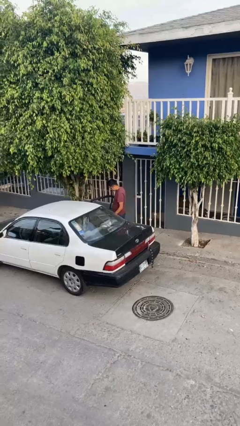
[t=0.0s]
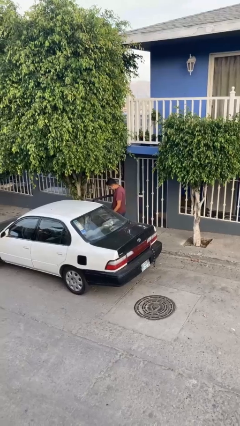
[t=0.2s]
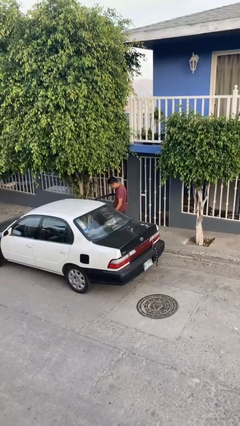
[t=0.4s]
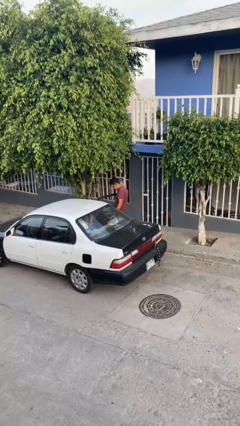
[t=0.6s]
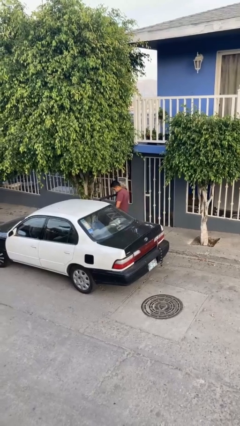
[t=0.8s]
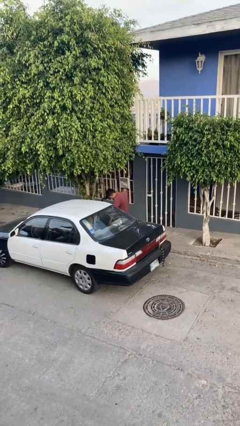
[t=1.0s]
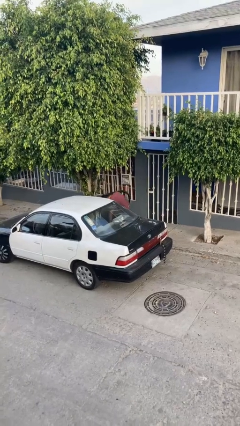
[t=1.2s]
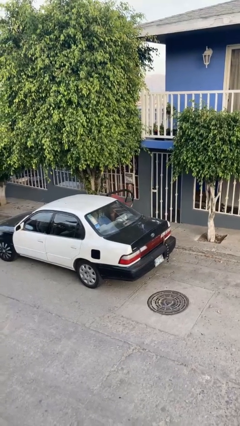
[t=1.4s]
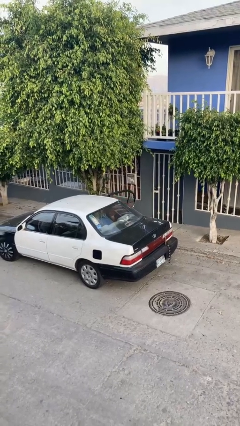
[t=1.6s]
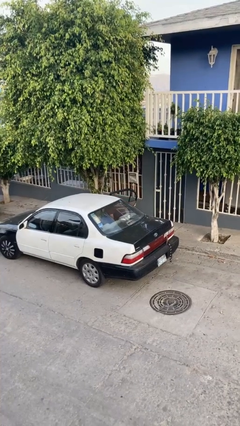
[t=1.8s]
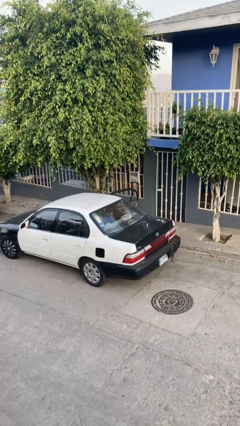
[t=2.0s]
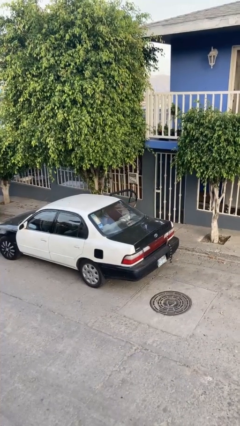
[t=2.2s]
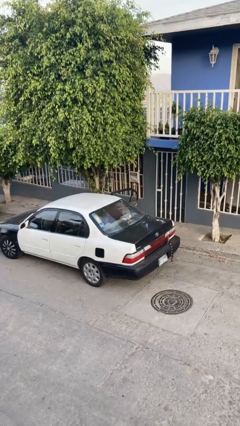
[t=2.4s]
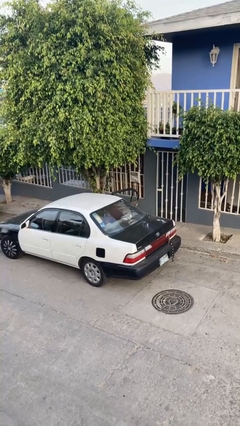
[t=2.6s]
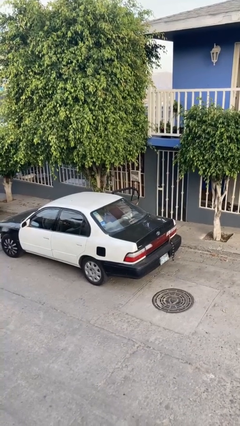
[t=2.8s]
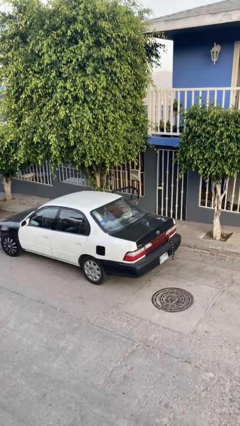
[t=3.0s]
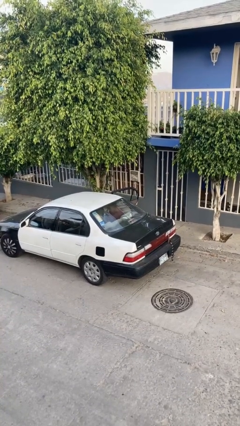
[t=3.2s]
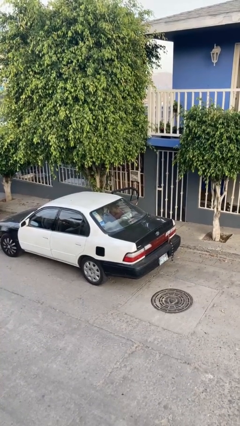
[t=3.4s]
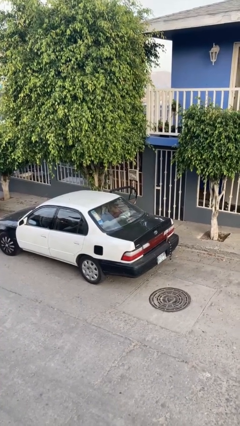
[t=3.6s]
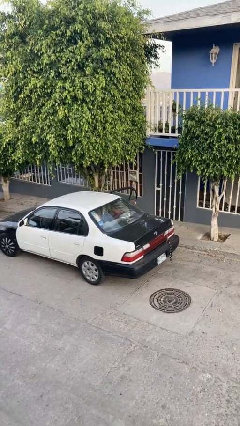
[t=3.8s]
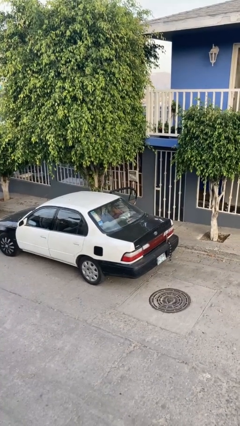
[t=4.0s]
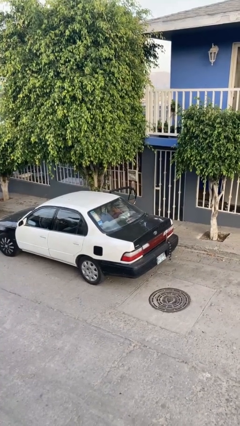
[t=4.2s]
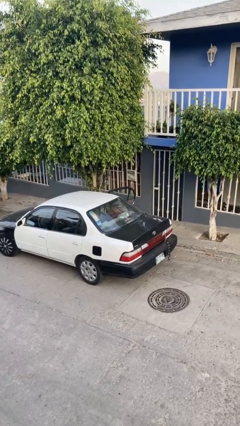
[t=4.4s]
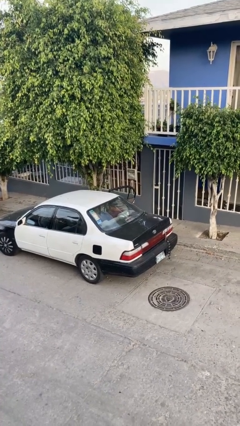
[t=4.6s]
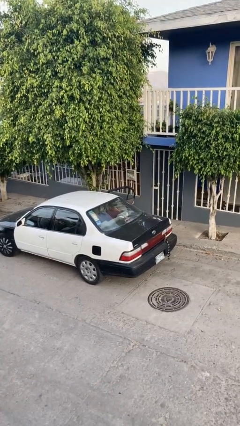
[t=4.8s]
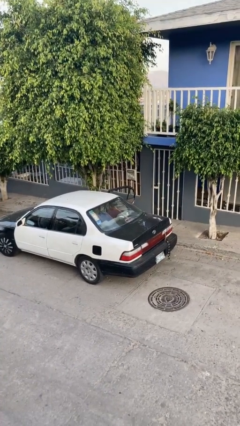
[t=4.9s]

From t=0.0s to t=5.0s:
person enters car

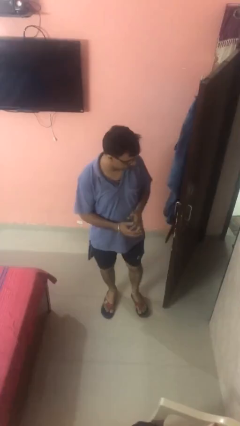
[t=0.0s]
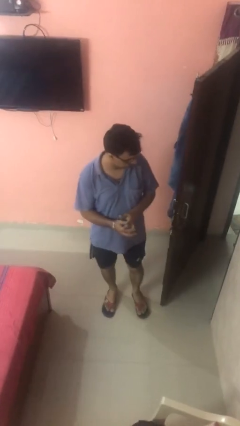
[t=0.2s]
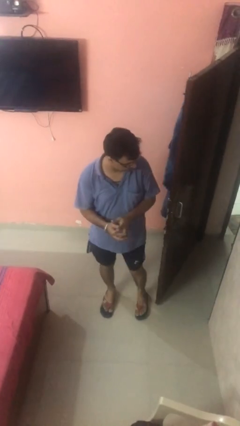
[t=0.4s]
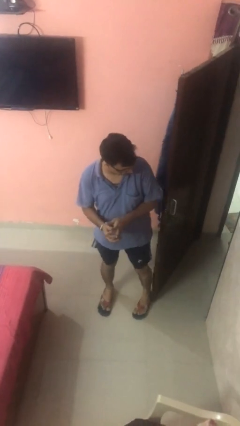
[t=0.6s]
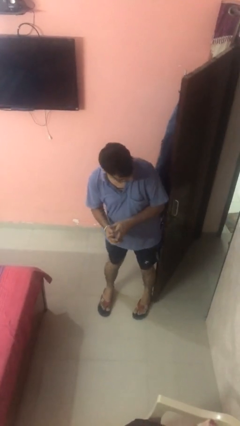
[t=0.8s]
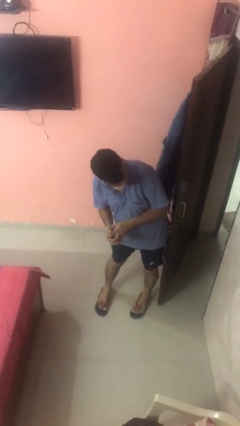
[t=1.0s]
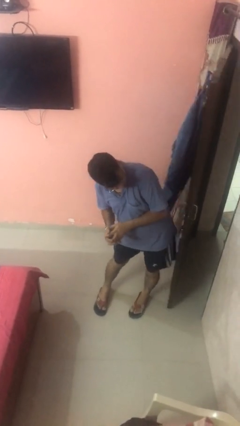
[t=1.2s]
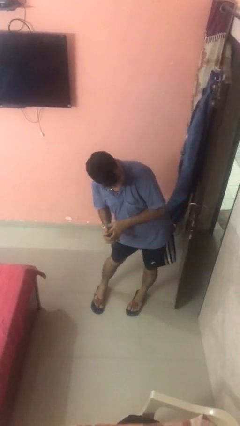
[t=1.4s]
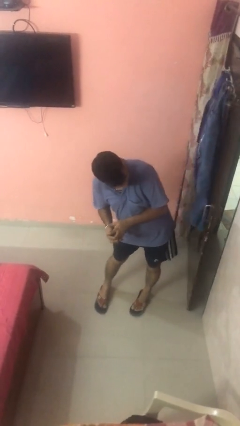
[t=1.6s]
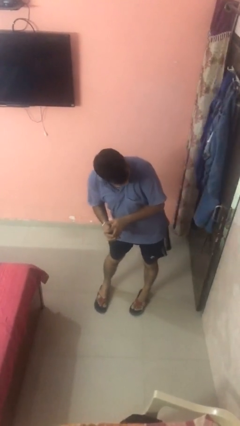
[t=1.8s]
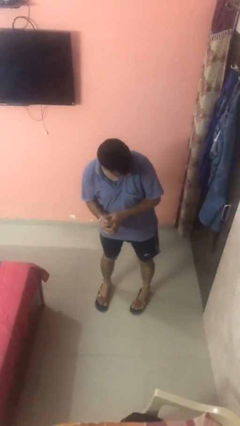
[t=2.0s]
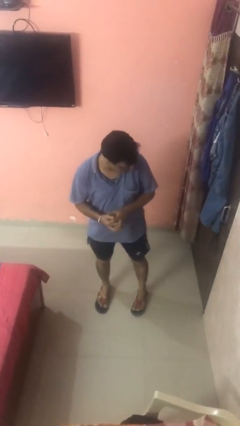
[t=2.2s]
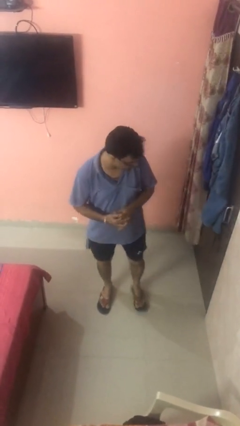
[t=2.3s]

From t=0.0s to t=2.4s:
person closes door with hip

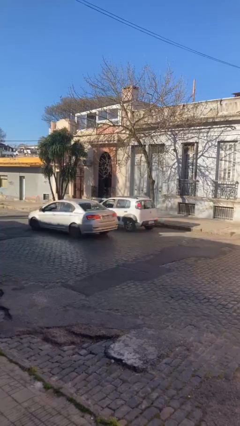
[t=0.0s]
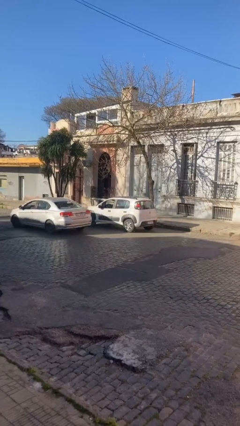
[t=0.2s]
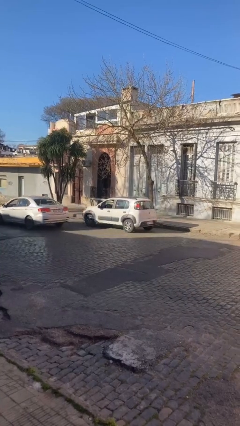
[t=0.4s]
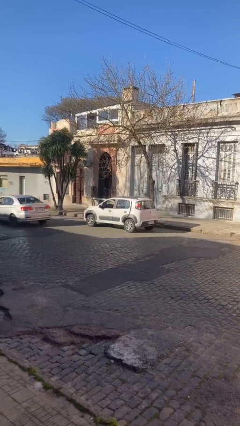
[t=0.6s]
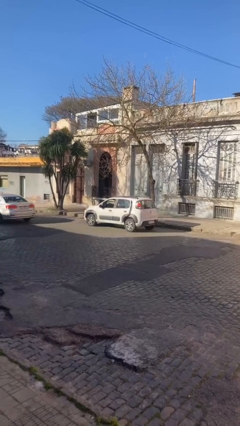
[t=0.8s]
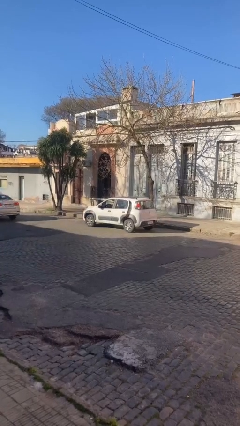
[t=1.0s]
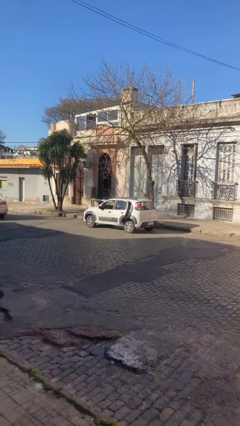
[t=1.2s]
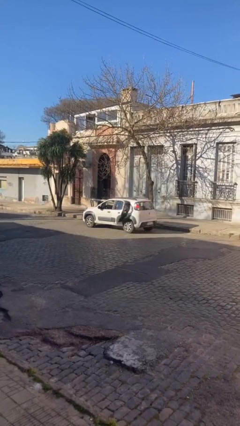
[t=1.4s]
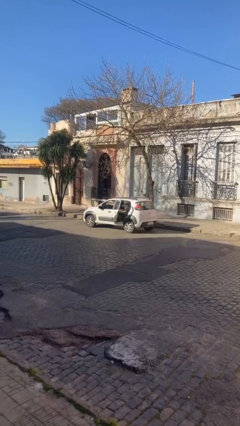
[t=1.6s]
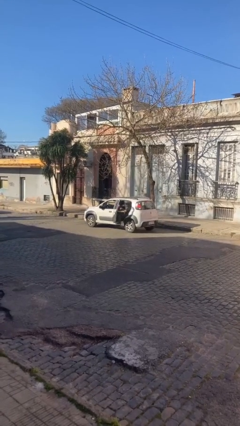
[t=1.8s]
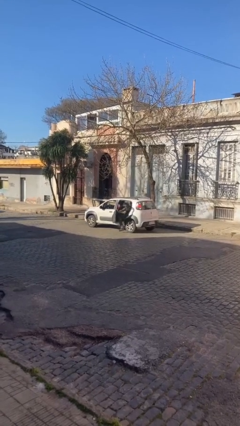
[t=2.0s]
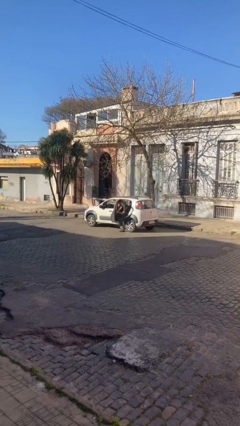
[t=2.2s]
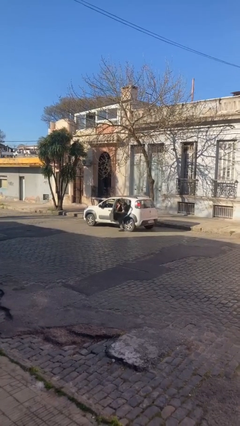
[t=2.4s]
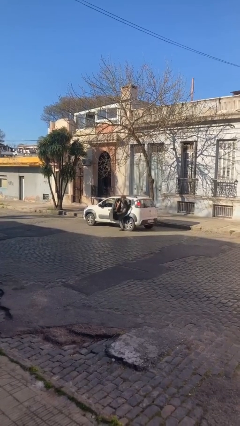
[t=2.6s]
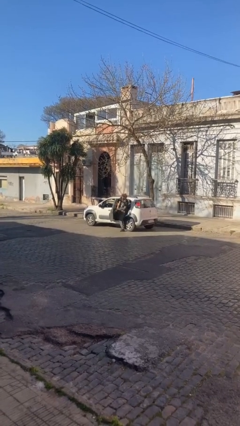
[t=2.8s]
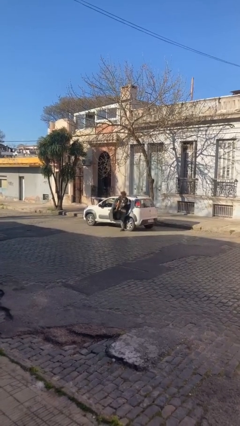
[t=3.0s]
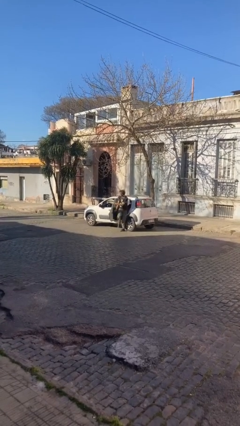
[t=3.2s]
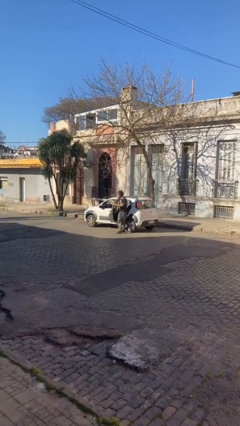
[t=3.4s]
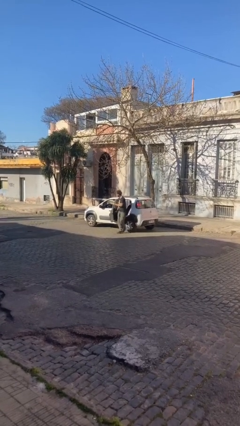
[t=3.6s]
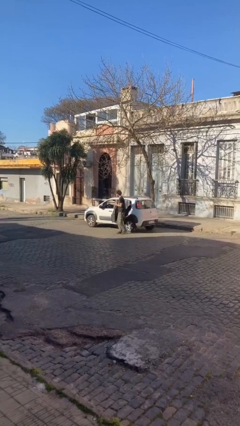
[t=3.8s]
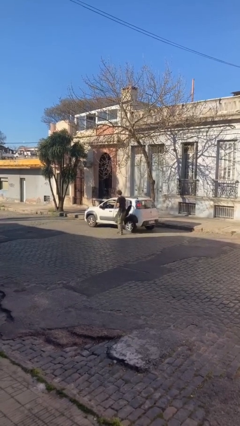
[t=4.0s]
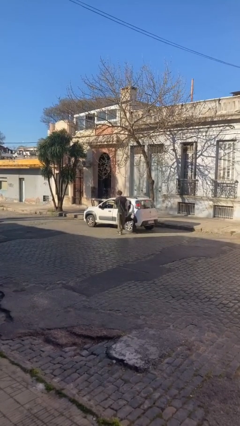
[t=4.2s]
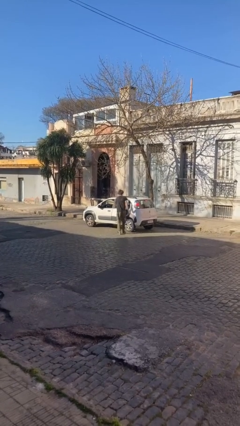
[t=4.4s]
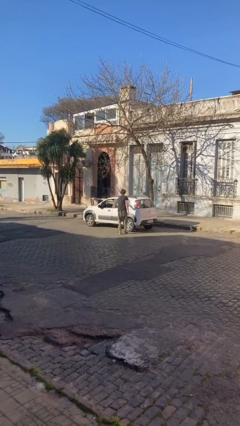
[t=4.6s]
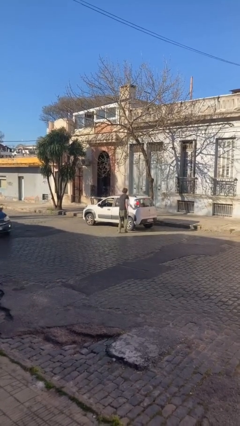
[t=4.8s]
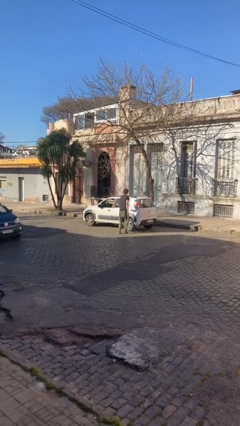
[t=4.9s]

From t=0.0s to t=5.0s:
car drops off person

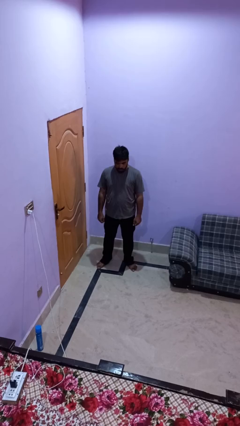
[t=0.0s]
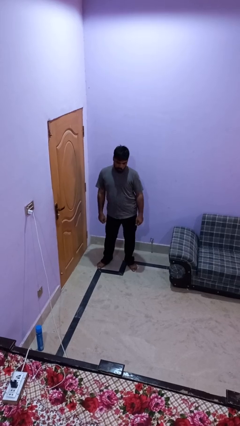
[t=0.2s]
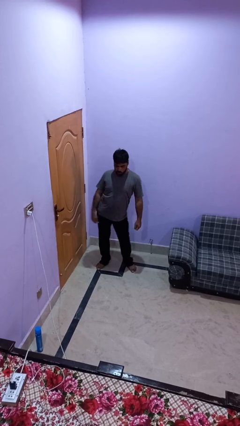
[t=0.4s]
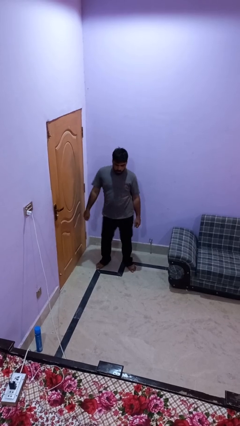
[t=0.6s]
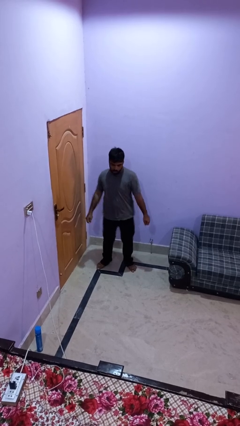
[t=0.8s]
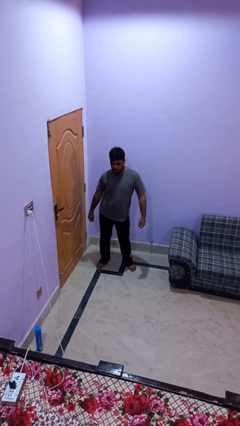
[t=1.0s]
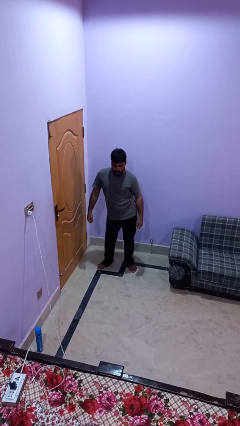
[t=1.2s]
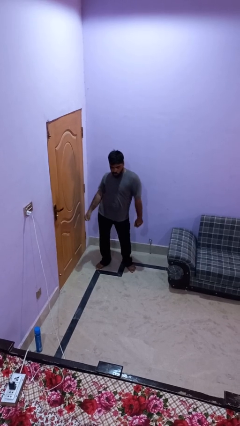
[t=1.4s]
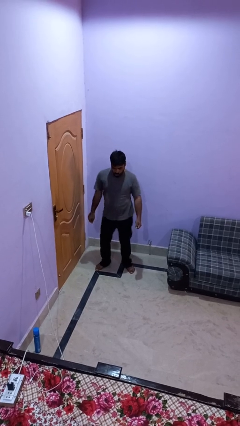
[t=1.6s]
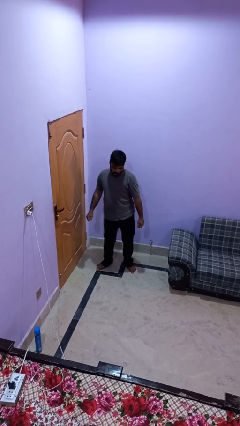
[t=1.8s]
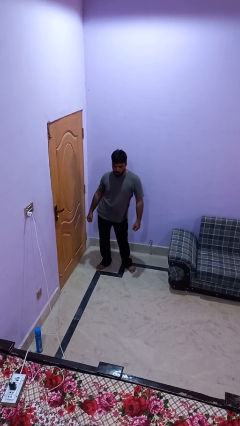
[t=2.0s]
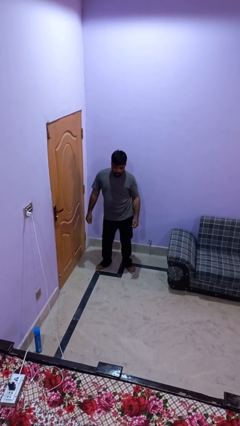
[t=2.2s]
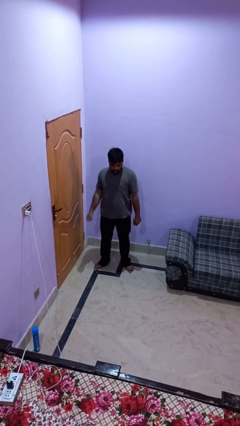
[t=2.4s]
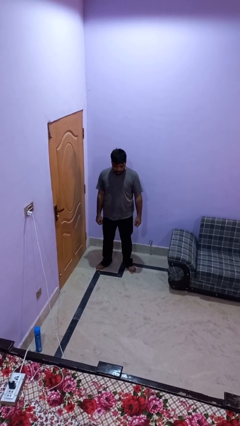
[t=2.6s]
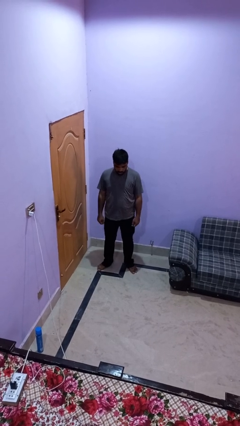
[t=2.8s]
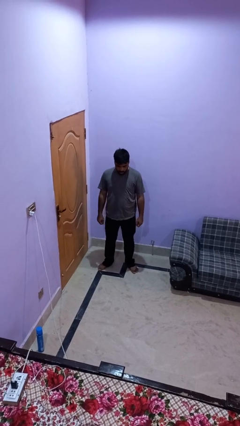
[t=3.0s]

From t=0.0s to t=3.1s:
person wiggles hips

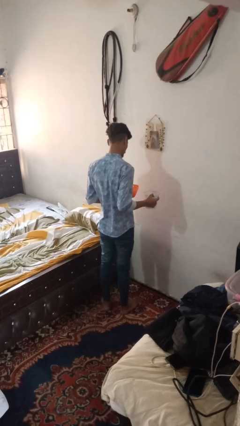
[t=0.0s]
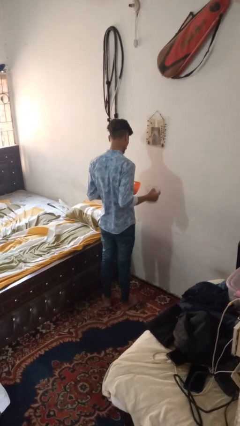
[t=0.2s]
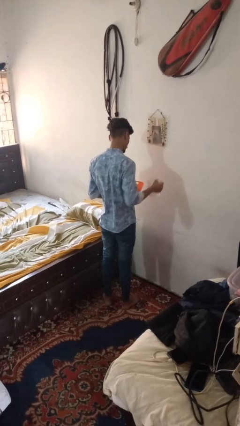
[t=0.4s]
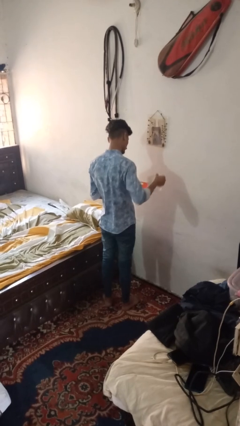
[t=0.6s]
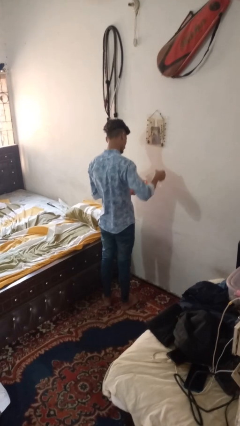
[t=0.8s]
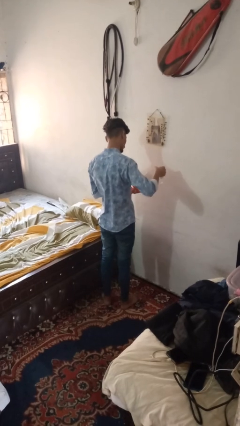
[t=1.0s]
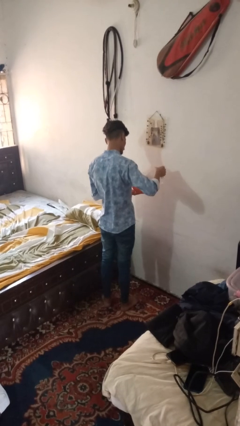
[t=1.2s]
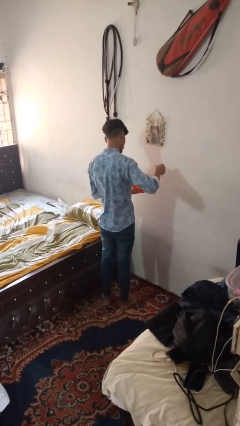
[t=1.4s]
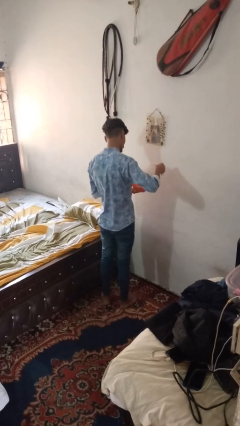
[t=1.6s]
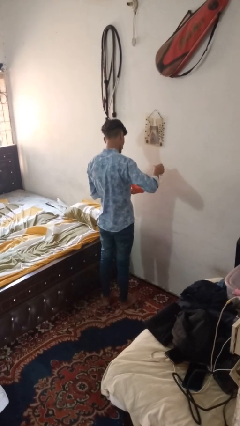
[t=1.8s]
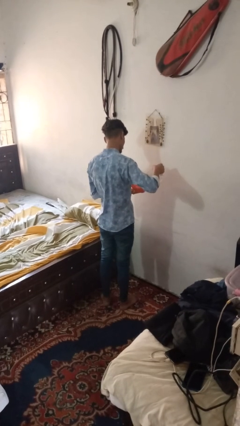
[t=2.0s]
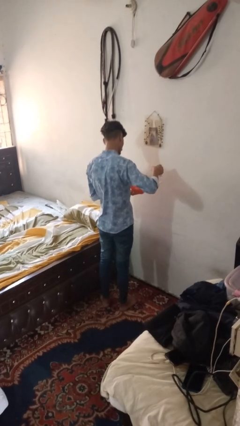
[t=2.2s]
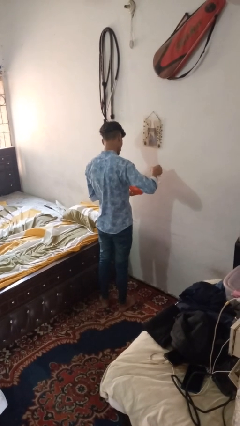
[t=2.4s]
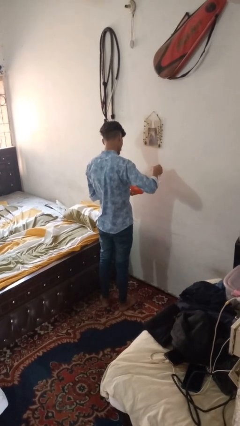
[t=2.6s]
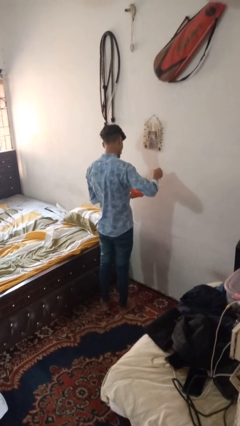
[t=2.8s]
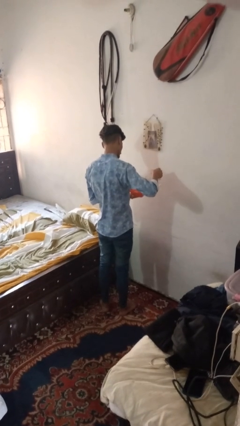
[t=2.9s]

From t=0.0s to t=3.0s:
person pours into bowl
